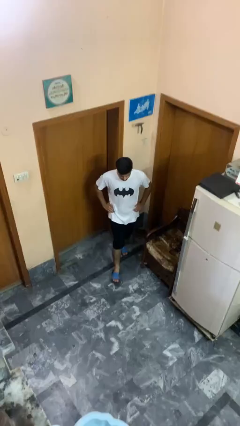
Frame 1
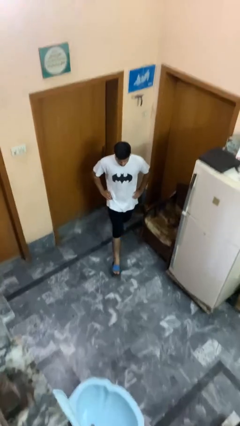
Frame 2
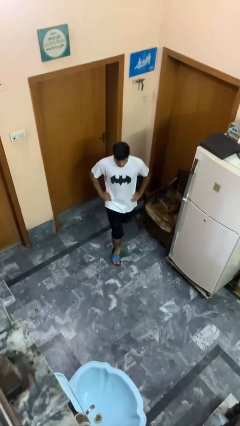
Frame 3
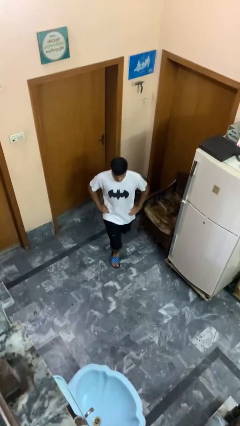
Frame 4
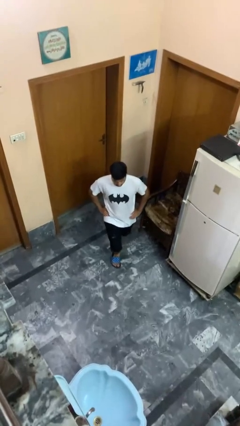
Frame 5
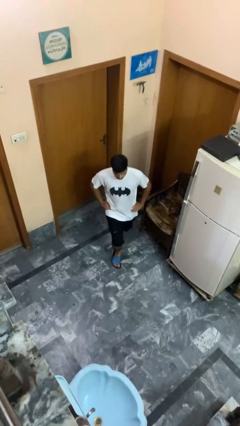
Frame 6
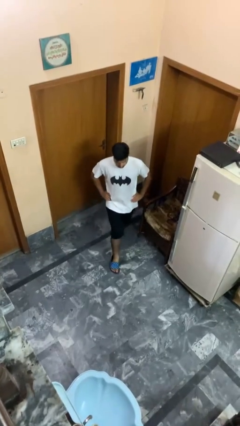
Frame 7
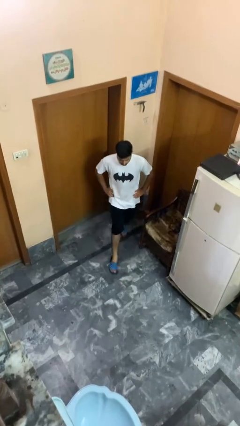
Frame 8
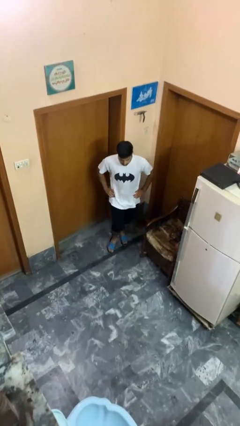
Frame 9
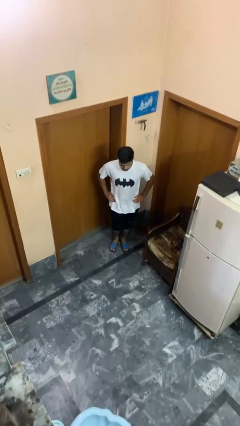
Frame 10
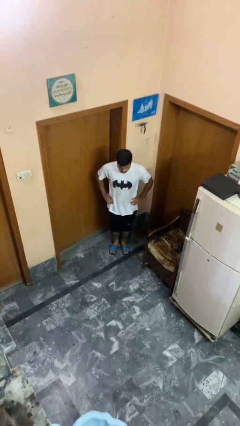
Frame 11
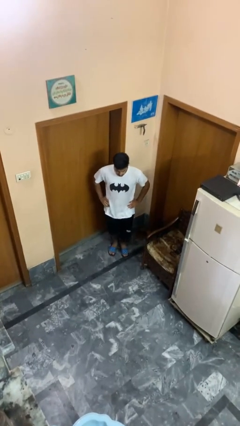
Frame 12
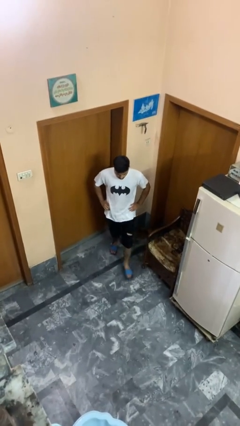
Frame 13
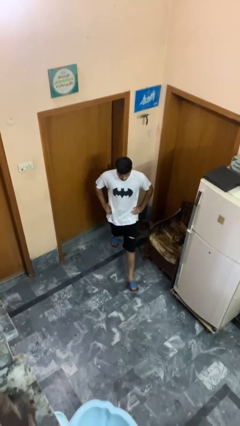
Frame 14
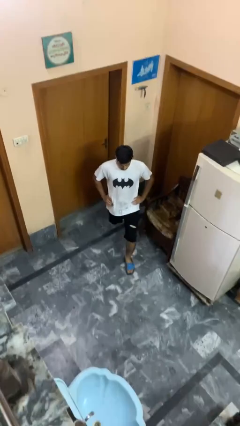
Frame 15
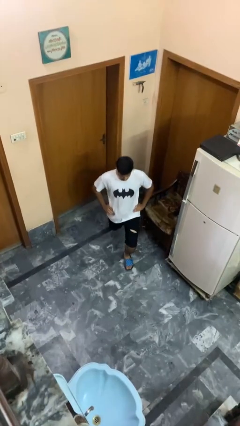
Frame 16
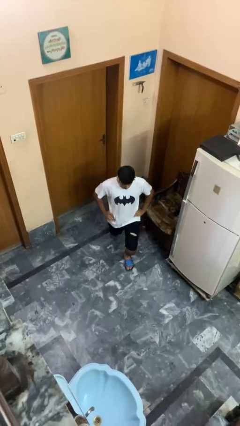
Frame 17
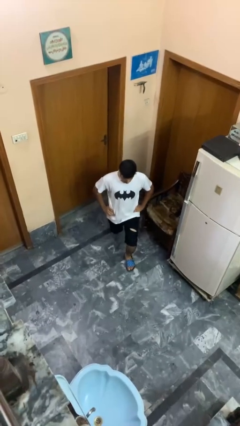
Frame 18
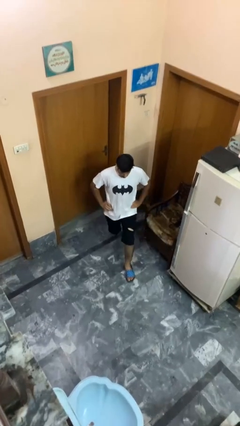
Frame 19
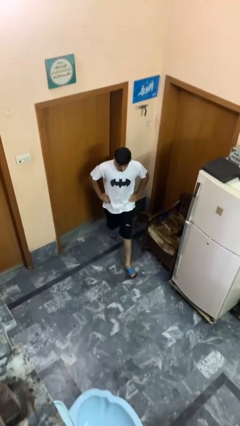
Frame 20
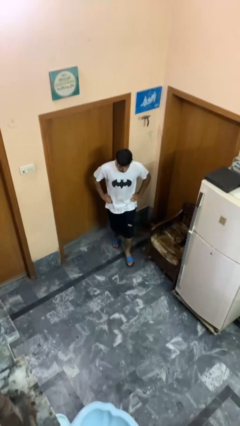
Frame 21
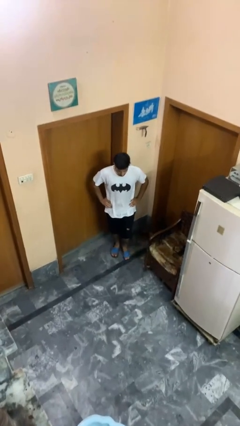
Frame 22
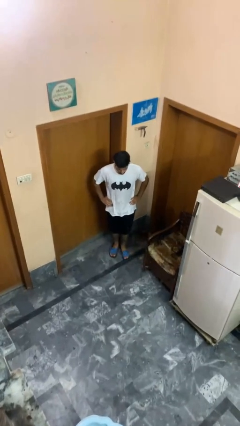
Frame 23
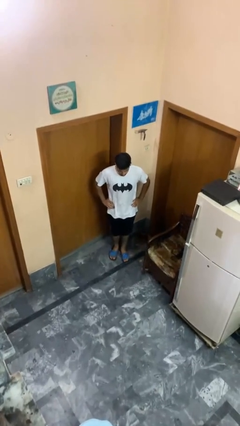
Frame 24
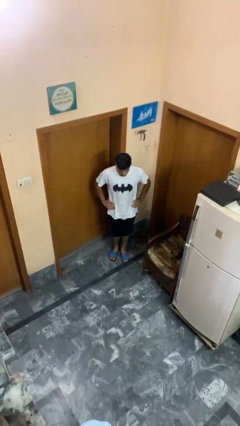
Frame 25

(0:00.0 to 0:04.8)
person exercises with lunges

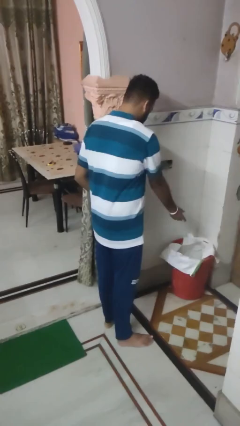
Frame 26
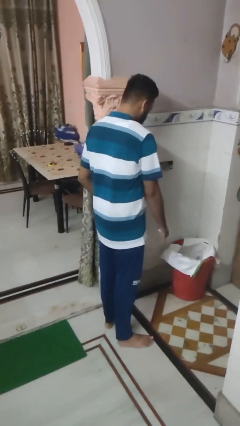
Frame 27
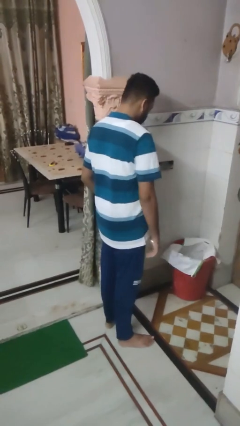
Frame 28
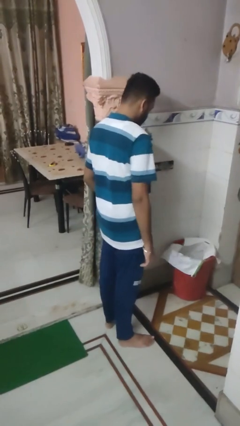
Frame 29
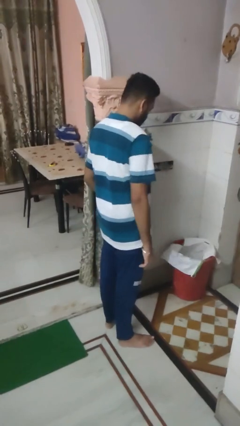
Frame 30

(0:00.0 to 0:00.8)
person discards trash

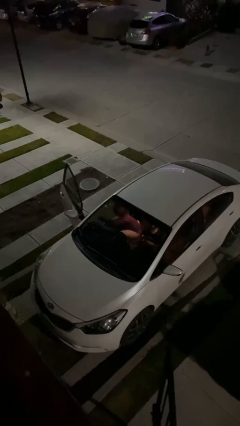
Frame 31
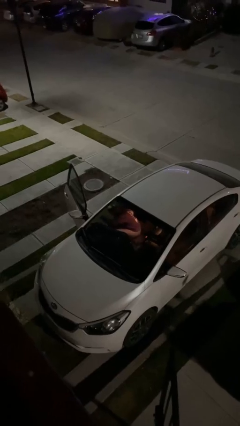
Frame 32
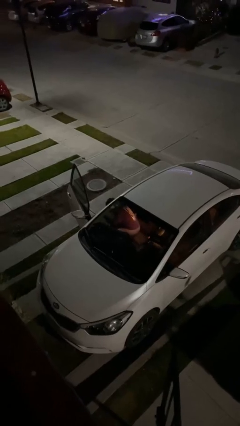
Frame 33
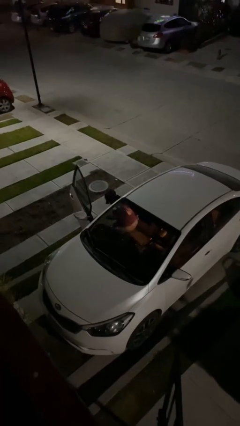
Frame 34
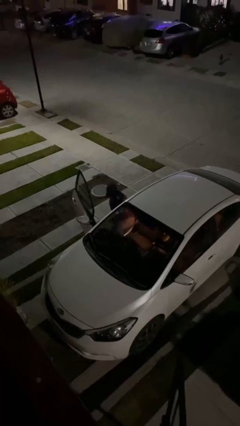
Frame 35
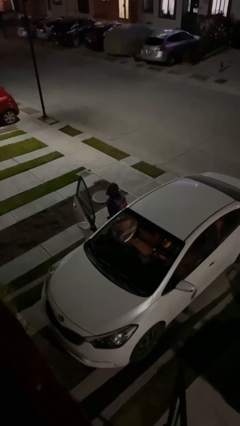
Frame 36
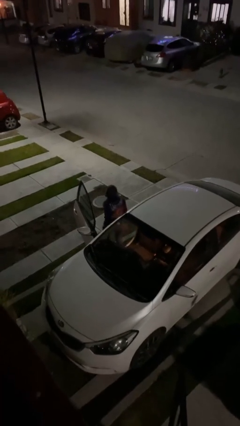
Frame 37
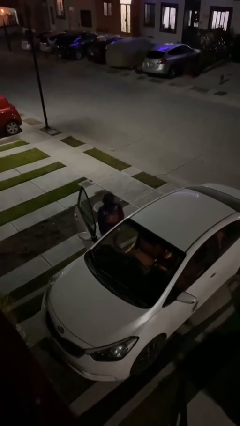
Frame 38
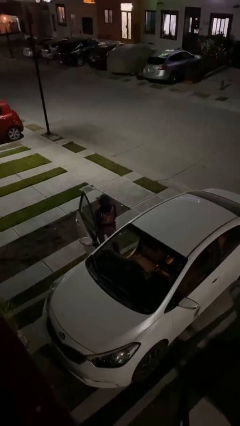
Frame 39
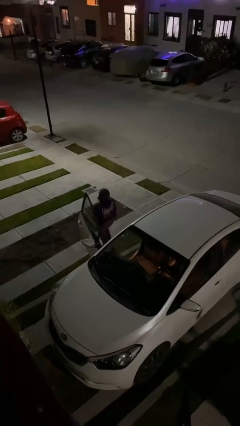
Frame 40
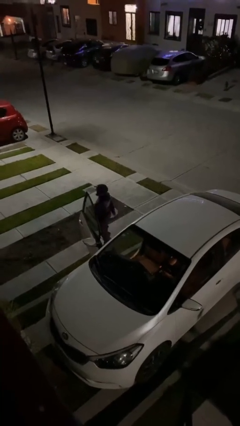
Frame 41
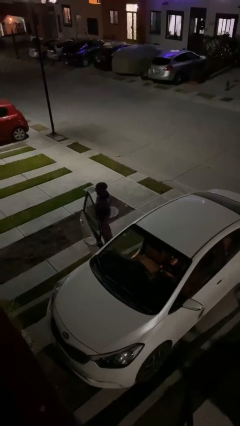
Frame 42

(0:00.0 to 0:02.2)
person exits car

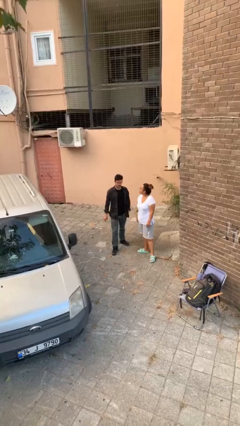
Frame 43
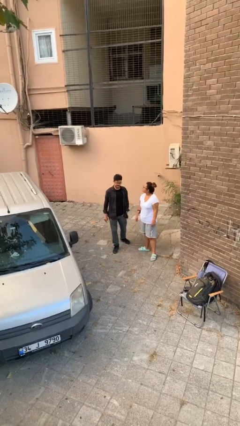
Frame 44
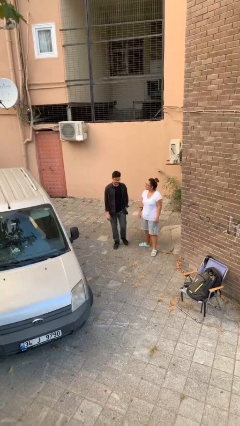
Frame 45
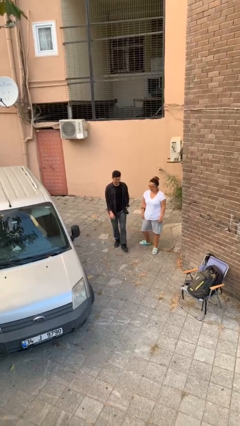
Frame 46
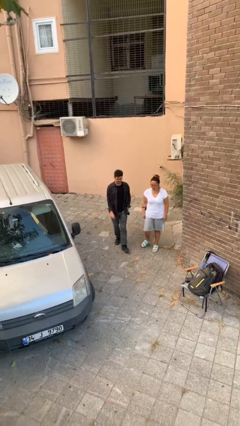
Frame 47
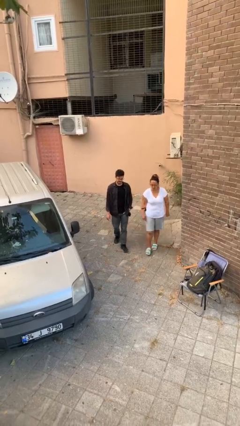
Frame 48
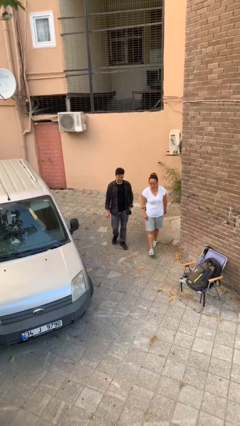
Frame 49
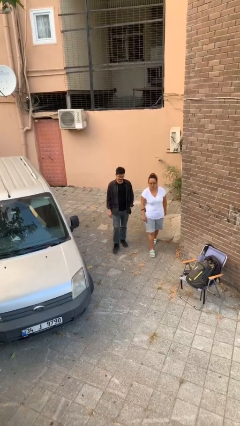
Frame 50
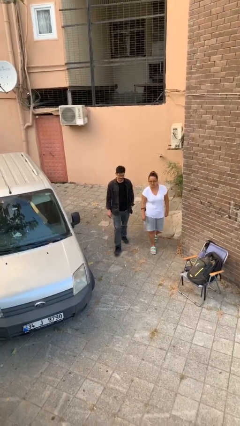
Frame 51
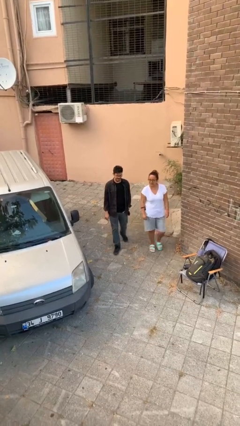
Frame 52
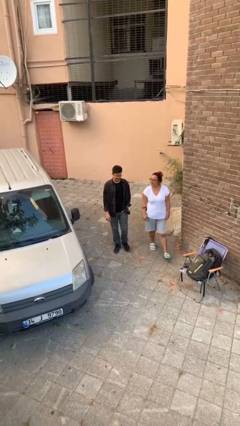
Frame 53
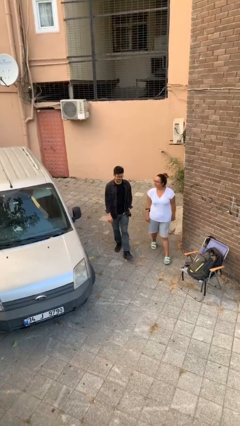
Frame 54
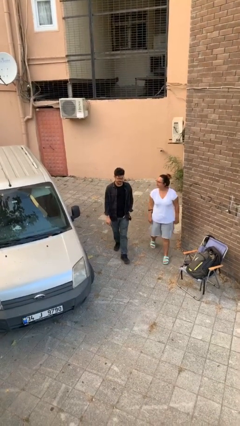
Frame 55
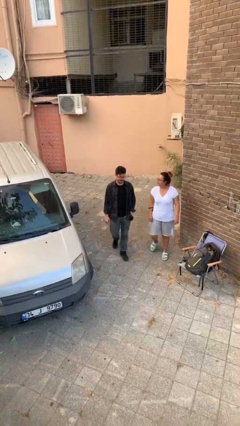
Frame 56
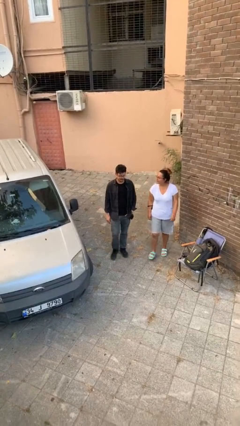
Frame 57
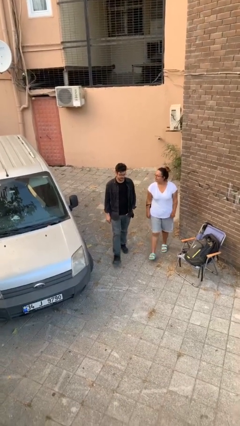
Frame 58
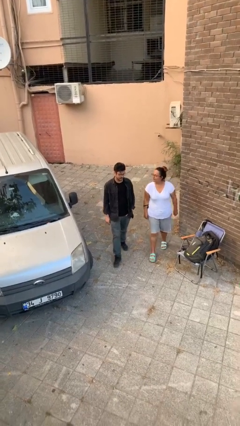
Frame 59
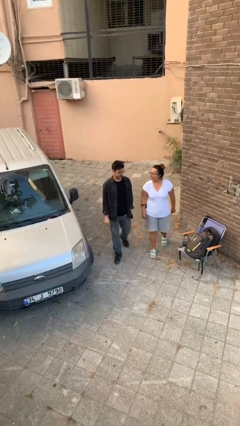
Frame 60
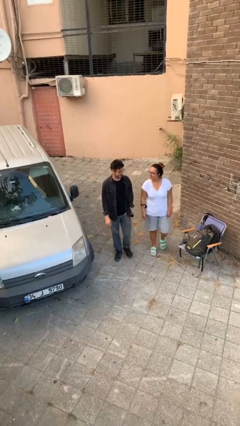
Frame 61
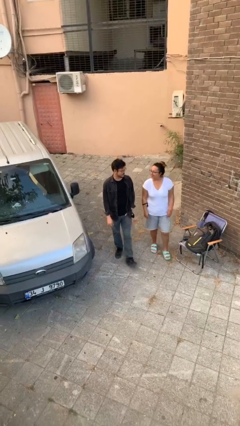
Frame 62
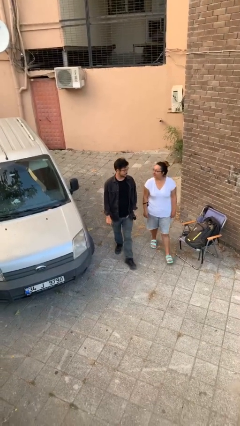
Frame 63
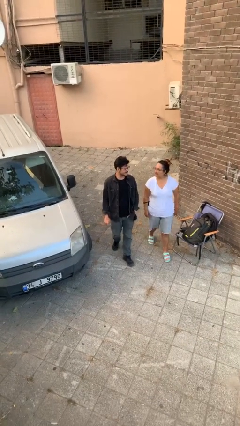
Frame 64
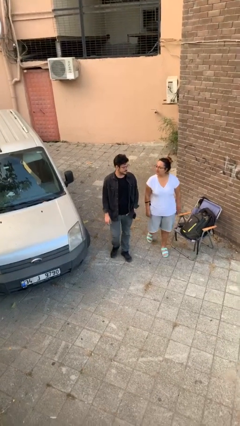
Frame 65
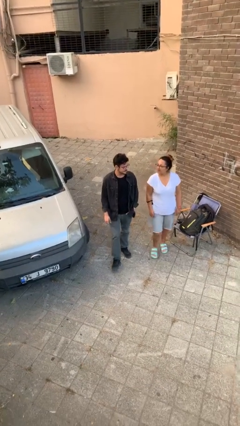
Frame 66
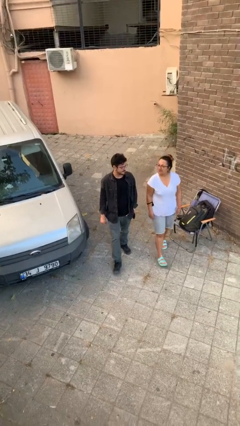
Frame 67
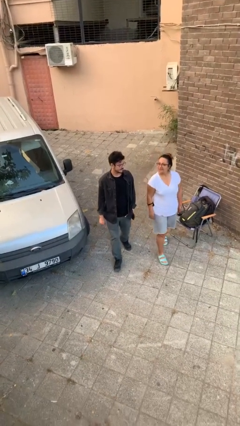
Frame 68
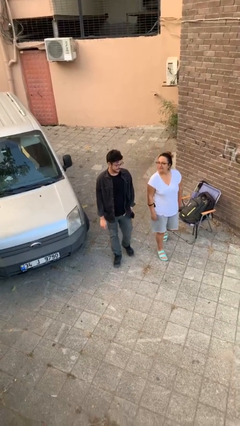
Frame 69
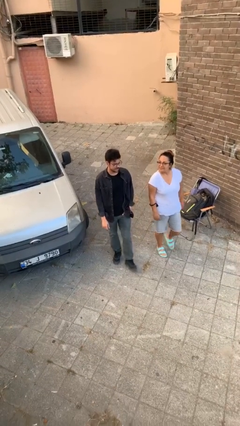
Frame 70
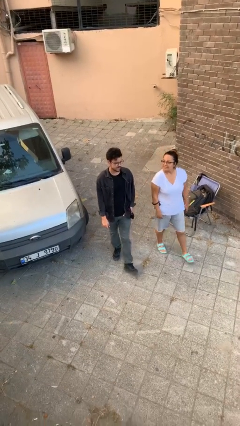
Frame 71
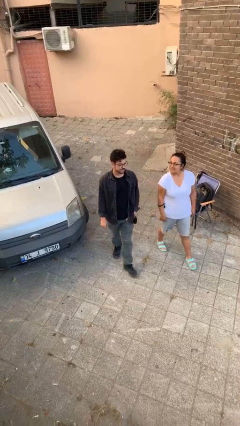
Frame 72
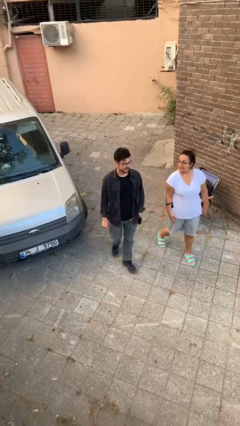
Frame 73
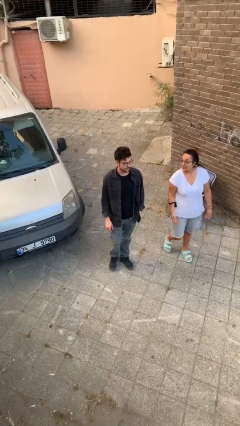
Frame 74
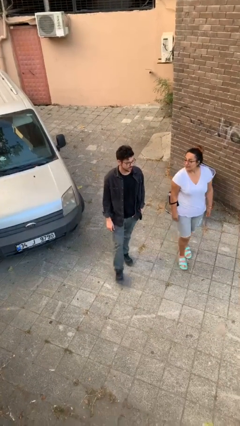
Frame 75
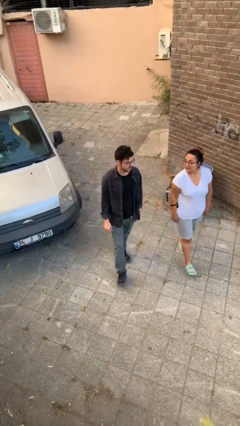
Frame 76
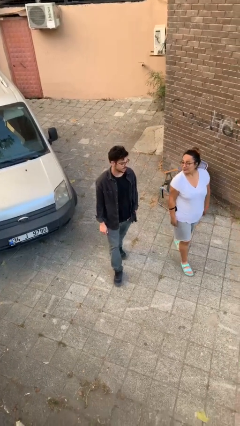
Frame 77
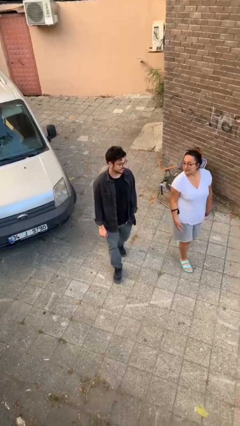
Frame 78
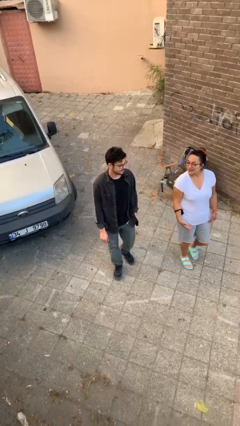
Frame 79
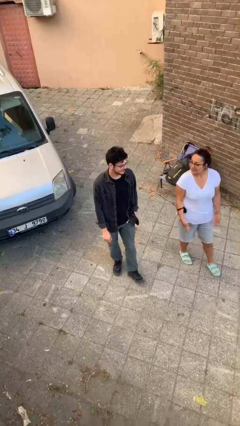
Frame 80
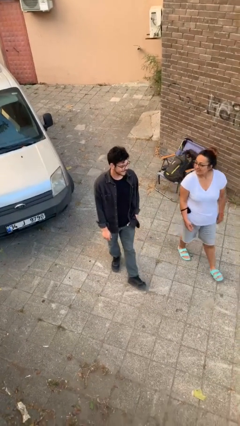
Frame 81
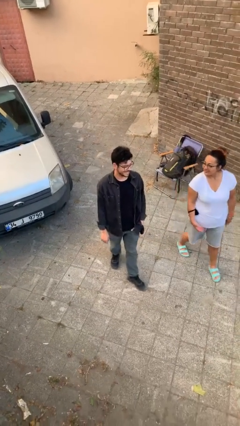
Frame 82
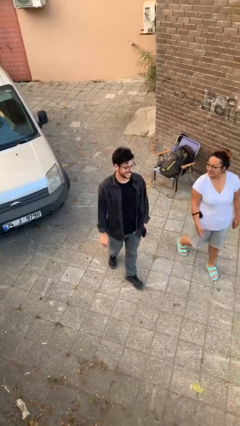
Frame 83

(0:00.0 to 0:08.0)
person talks to person

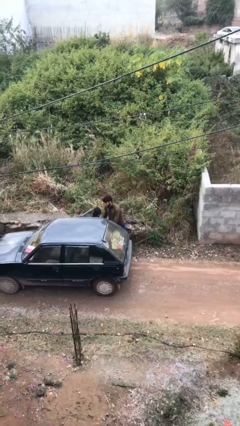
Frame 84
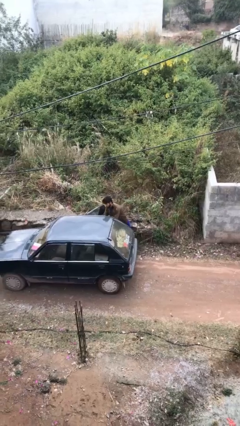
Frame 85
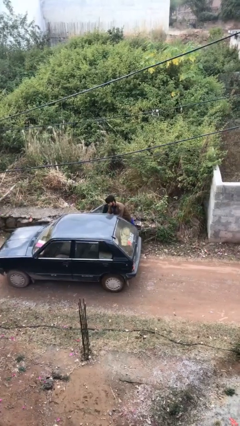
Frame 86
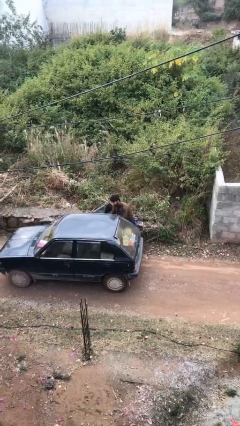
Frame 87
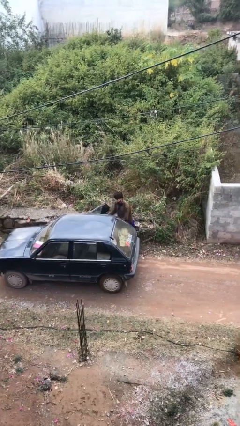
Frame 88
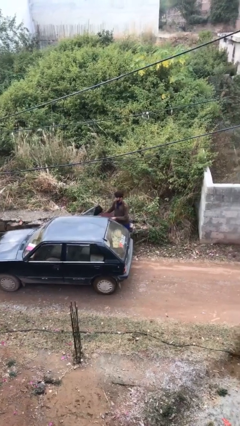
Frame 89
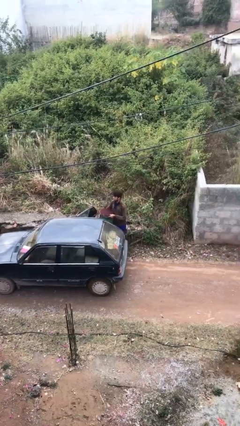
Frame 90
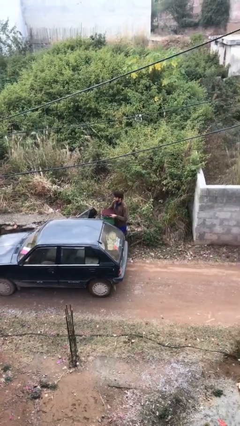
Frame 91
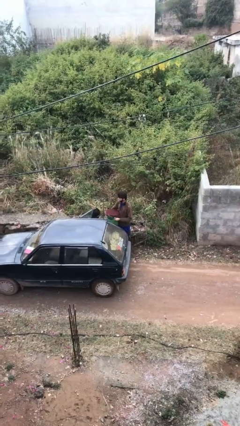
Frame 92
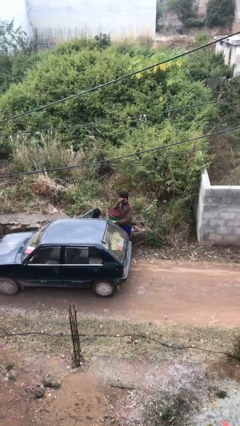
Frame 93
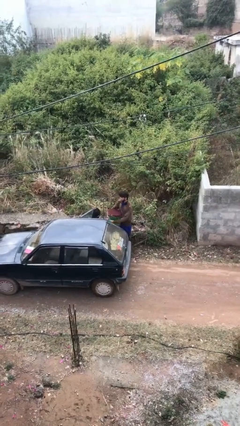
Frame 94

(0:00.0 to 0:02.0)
person unloads car
